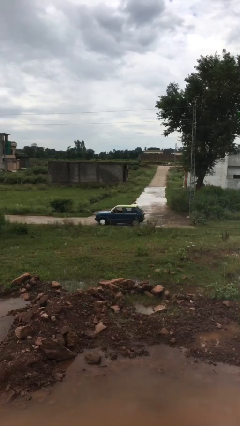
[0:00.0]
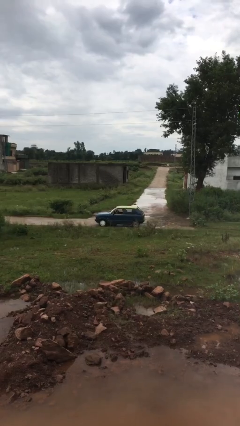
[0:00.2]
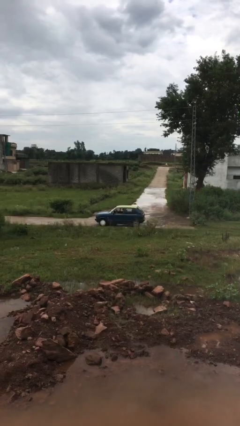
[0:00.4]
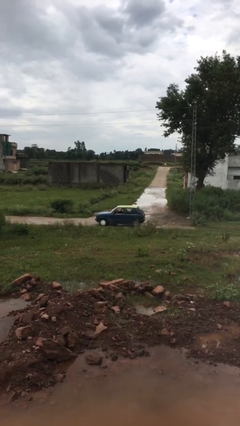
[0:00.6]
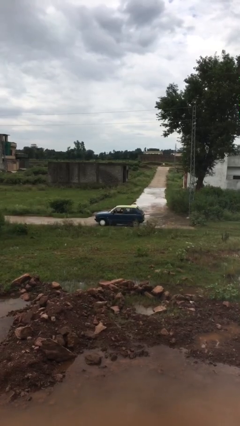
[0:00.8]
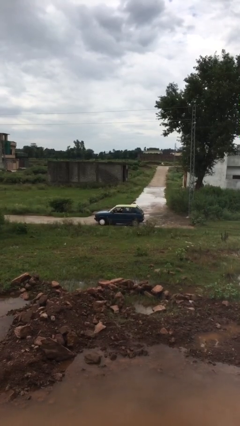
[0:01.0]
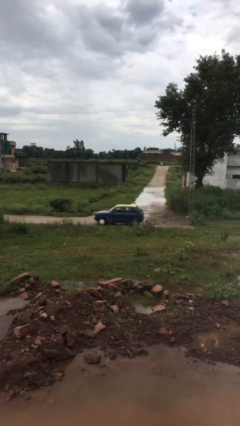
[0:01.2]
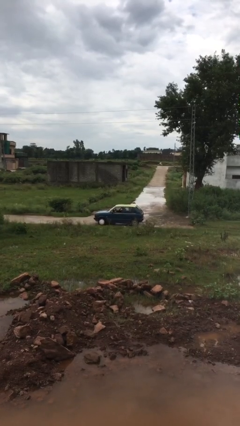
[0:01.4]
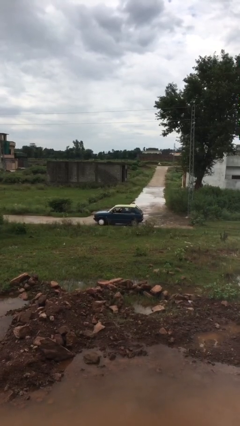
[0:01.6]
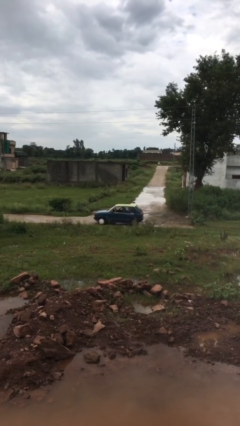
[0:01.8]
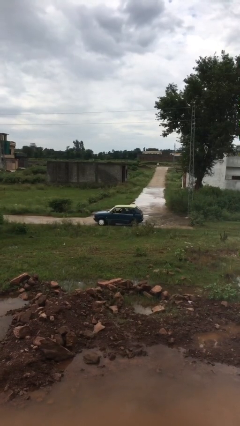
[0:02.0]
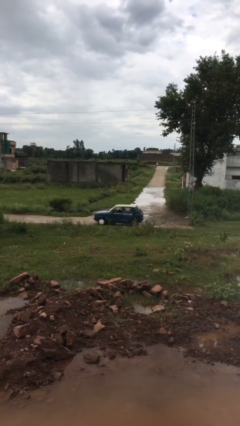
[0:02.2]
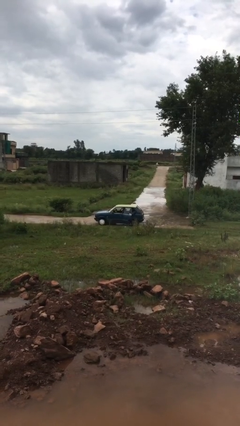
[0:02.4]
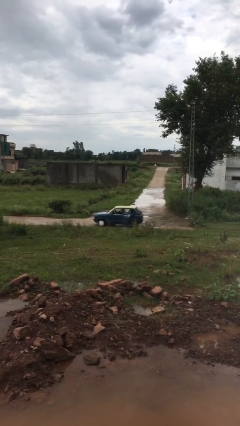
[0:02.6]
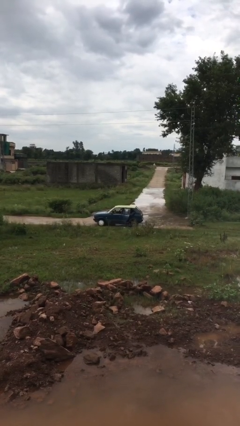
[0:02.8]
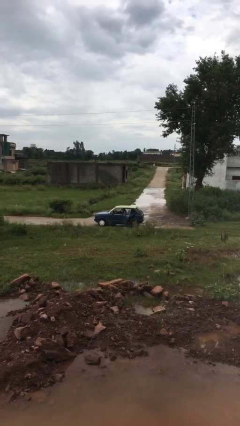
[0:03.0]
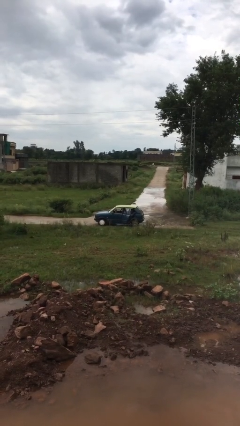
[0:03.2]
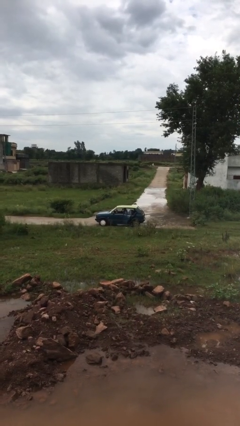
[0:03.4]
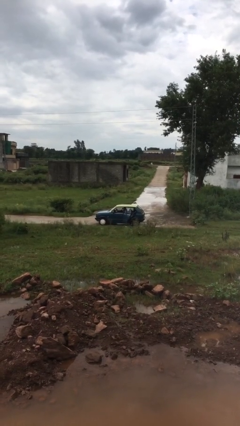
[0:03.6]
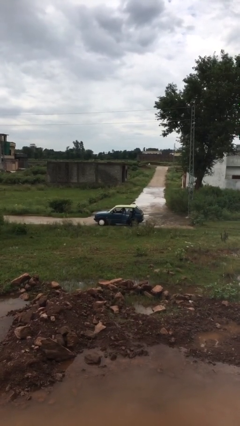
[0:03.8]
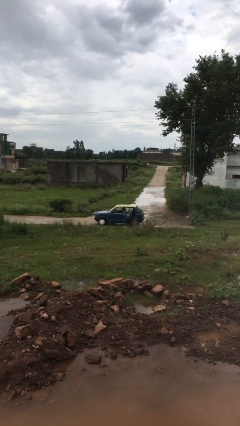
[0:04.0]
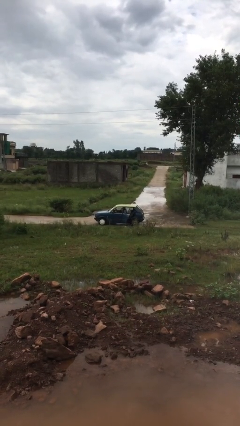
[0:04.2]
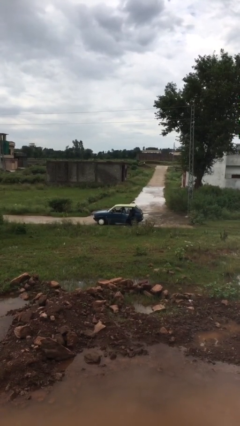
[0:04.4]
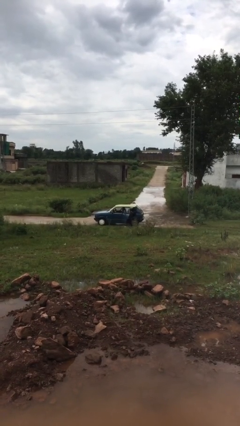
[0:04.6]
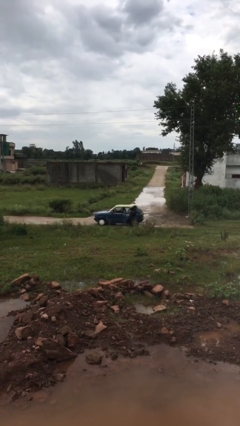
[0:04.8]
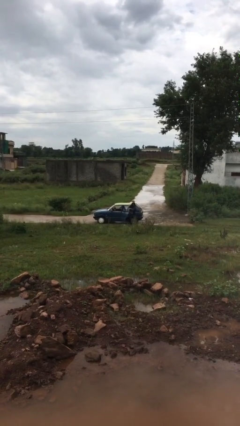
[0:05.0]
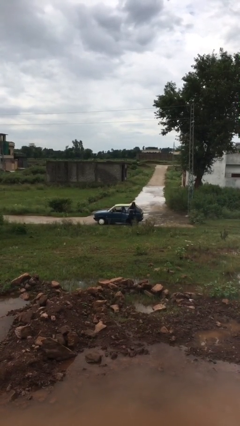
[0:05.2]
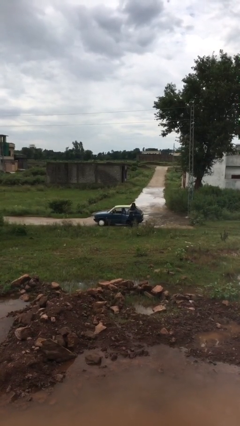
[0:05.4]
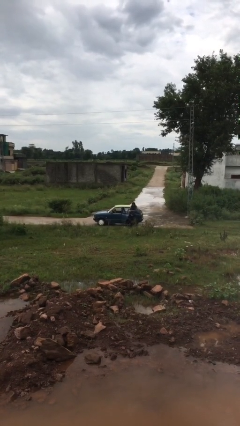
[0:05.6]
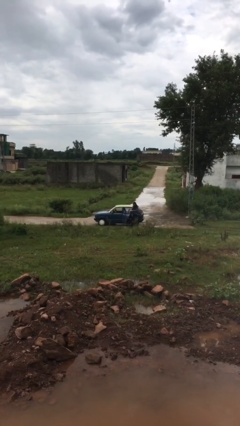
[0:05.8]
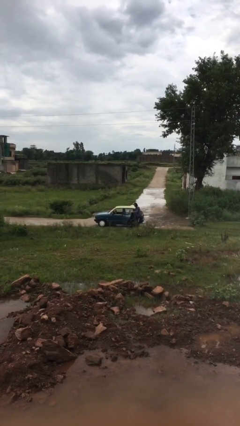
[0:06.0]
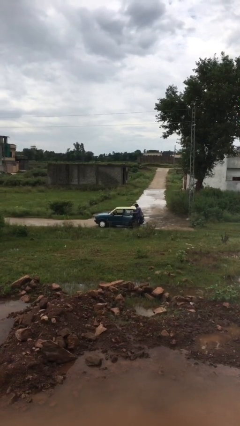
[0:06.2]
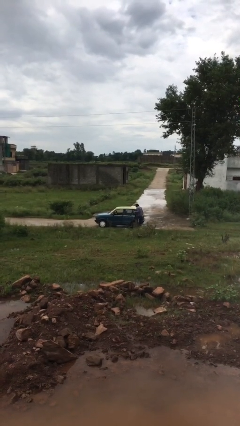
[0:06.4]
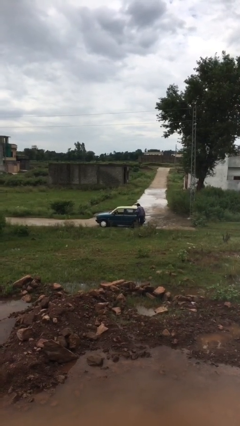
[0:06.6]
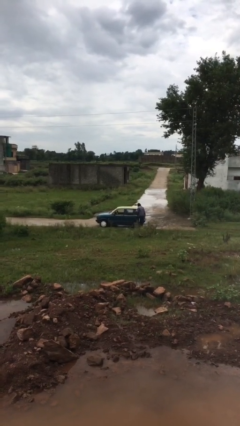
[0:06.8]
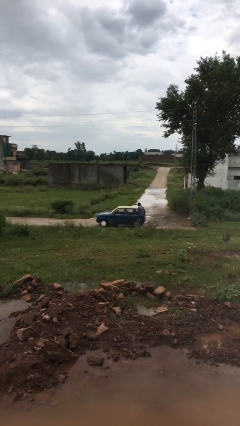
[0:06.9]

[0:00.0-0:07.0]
car drops off person

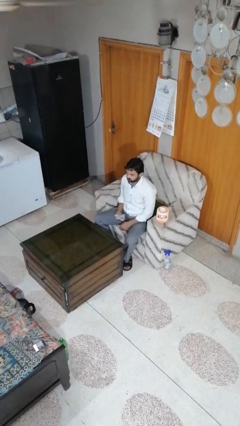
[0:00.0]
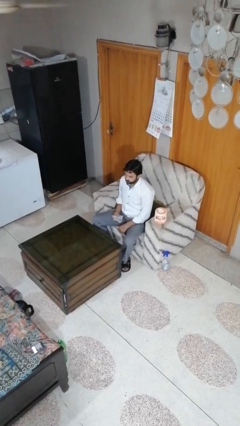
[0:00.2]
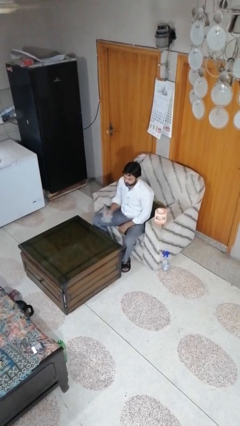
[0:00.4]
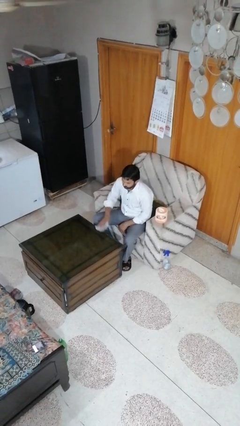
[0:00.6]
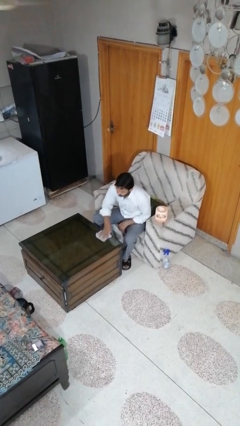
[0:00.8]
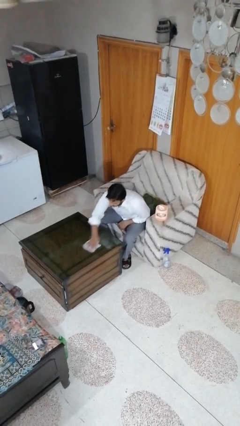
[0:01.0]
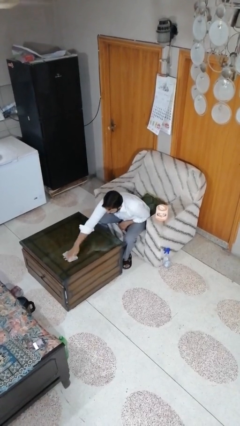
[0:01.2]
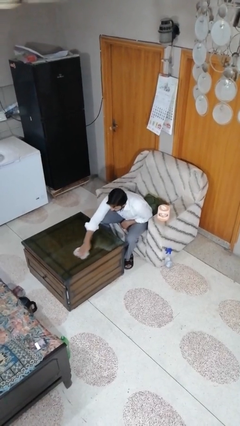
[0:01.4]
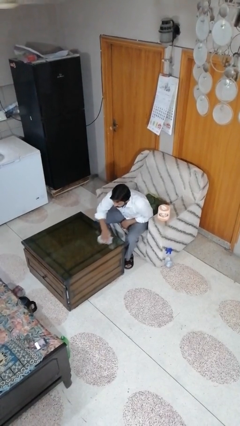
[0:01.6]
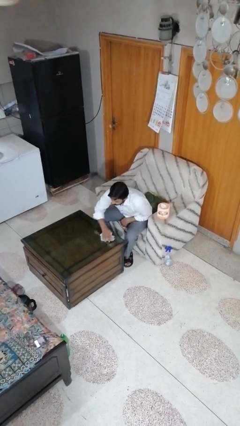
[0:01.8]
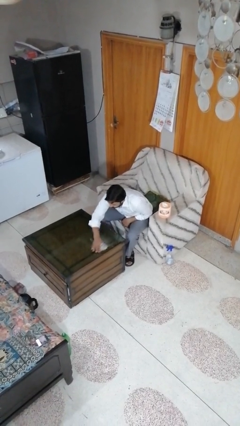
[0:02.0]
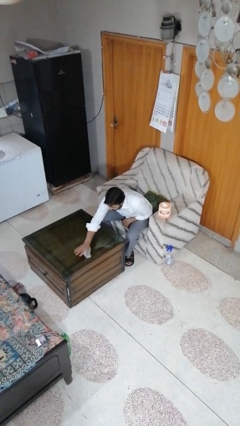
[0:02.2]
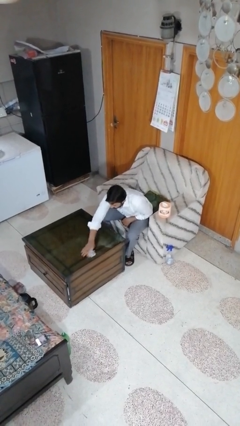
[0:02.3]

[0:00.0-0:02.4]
person cleans table with rag

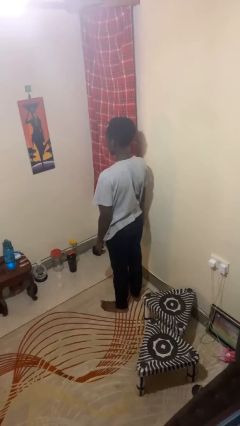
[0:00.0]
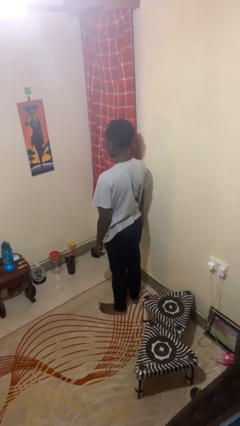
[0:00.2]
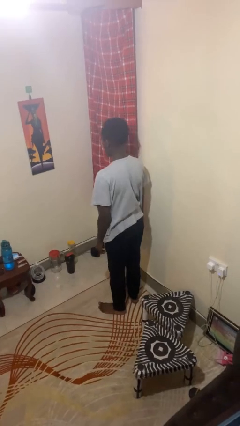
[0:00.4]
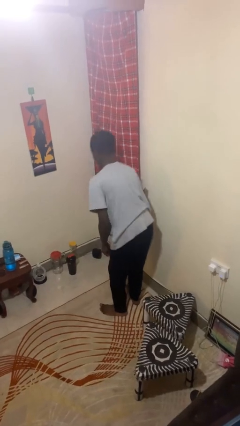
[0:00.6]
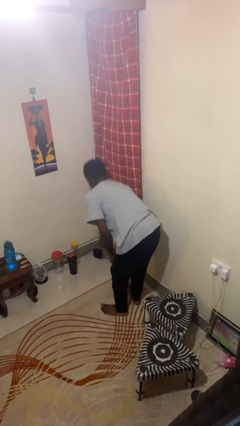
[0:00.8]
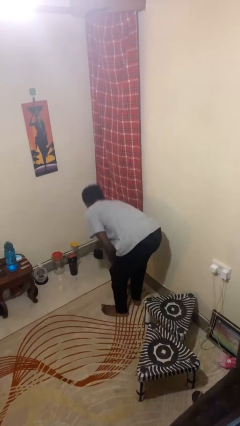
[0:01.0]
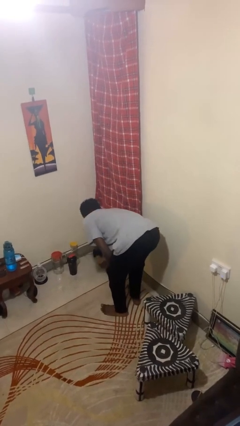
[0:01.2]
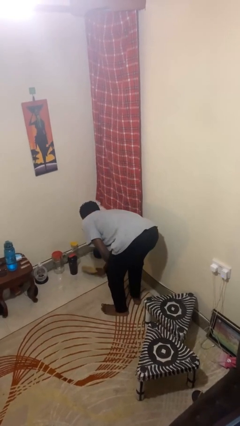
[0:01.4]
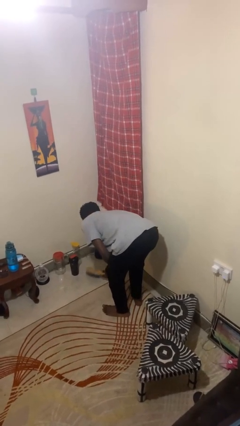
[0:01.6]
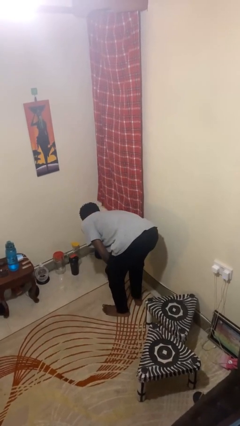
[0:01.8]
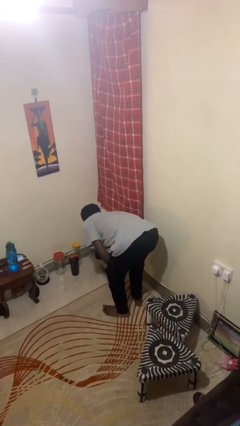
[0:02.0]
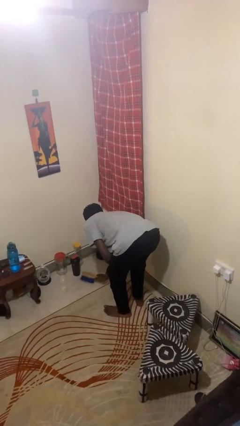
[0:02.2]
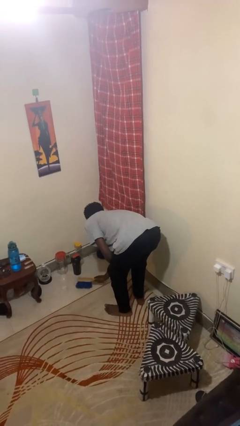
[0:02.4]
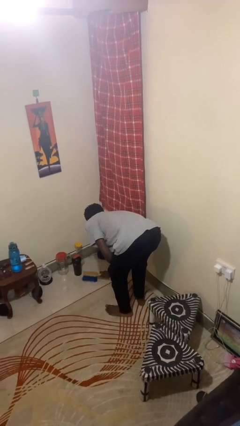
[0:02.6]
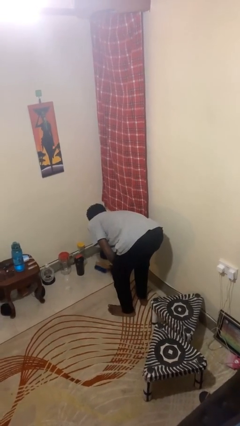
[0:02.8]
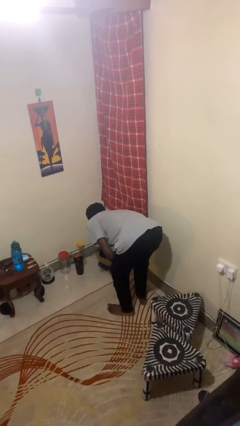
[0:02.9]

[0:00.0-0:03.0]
person sweeps floor

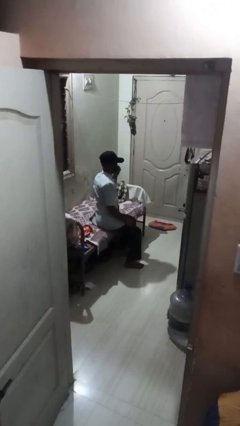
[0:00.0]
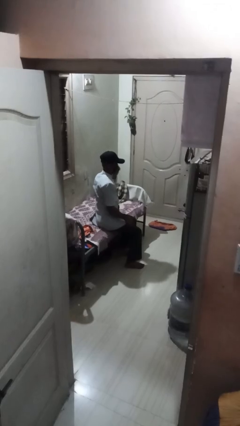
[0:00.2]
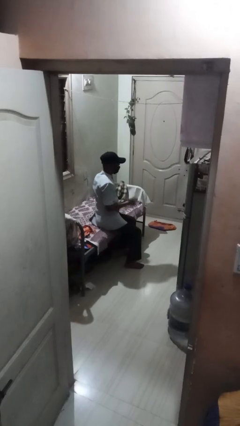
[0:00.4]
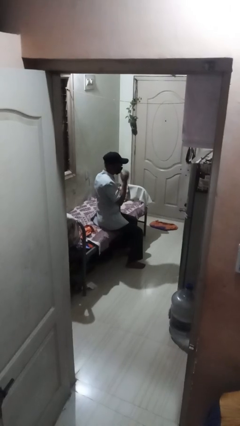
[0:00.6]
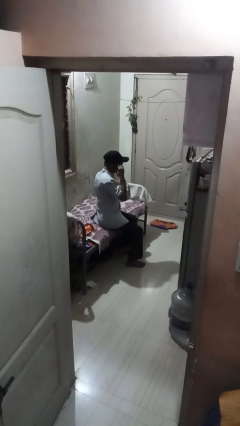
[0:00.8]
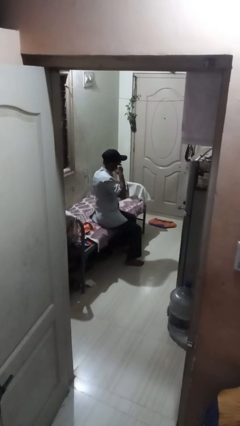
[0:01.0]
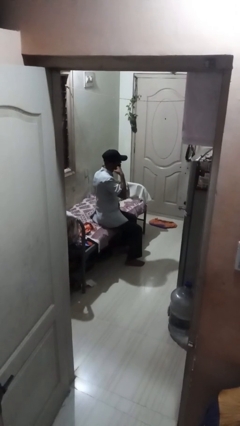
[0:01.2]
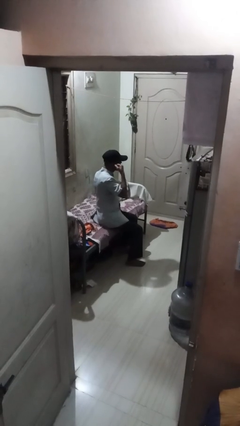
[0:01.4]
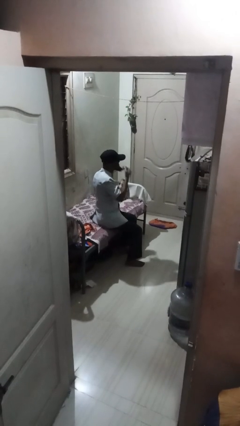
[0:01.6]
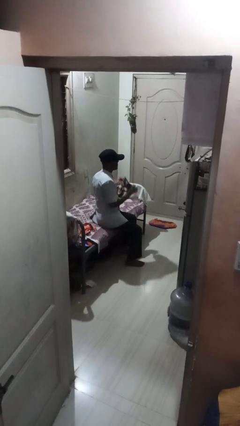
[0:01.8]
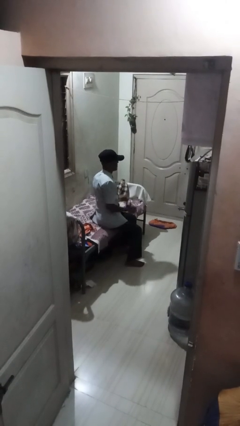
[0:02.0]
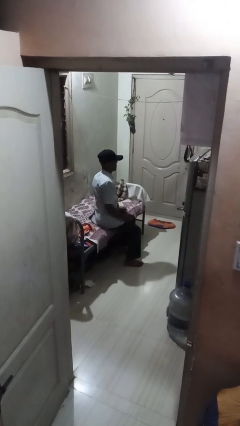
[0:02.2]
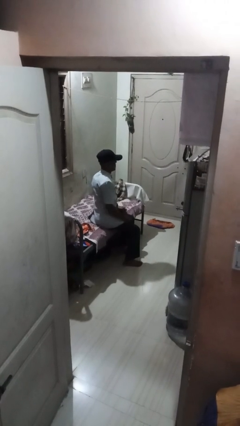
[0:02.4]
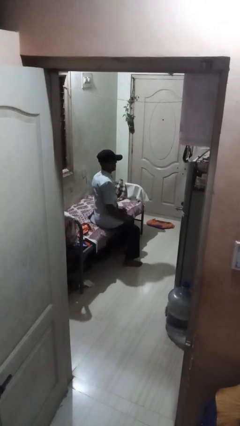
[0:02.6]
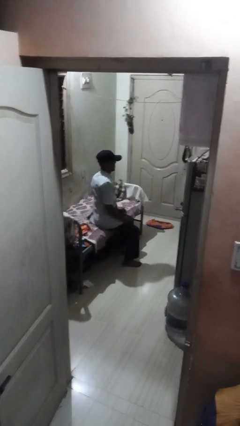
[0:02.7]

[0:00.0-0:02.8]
person takes off facemask

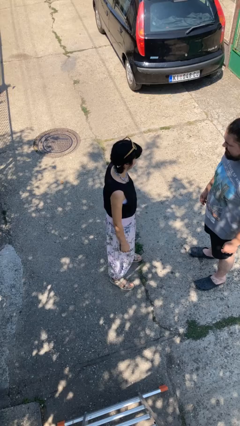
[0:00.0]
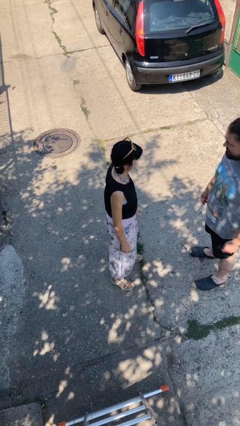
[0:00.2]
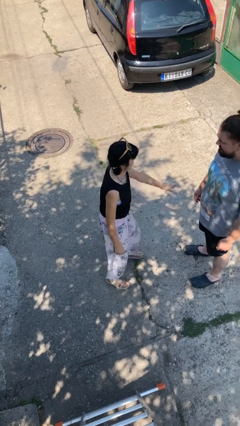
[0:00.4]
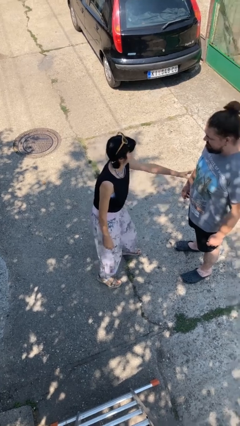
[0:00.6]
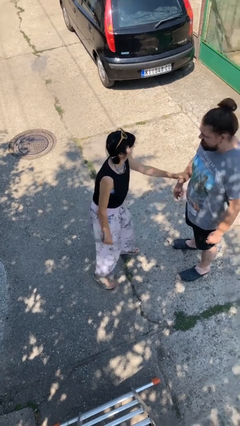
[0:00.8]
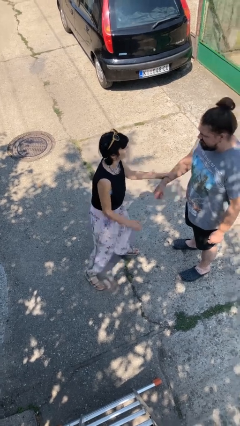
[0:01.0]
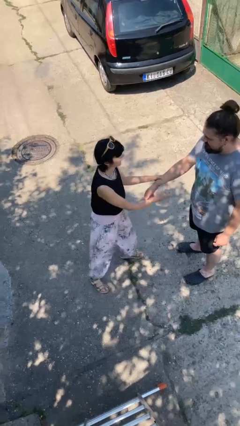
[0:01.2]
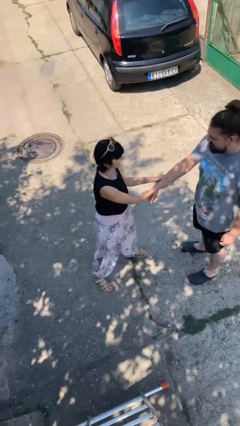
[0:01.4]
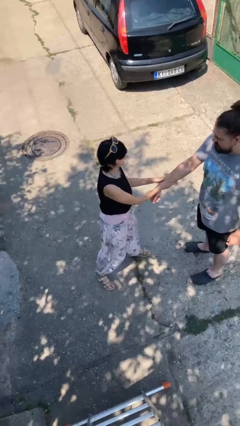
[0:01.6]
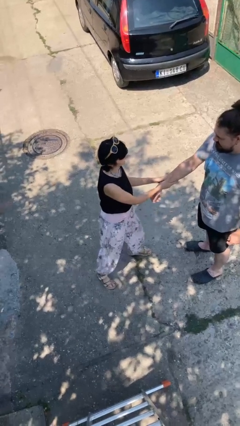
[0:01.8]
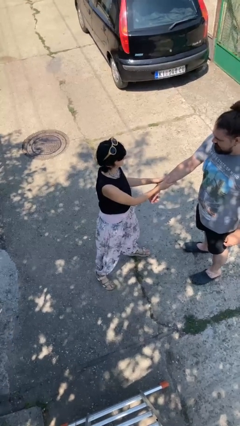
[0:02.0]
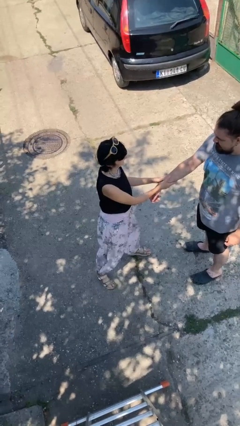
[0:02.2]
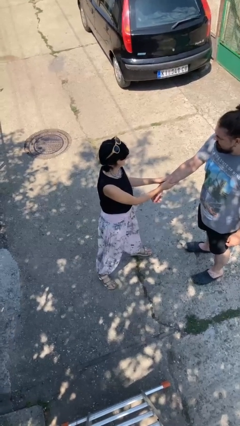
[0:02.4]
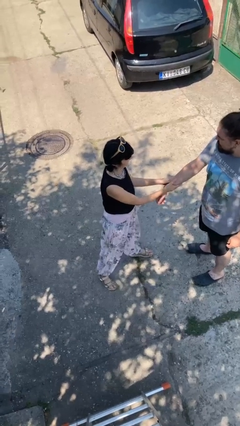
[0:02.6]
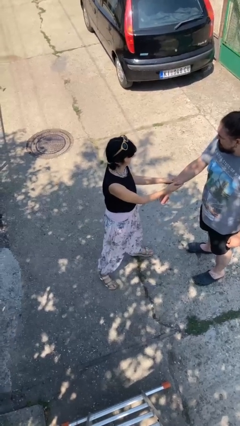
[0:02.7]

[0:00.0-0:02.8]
person grabs person by forearm
